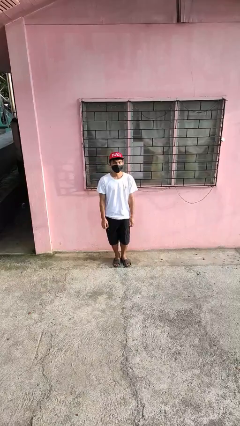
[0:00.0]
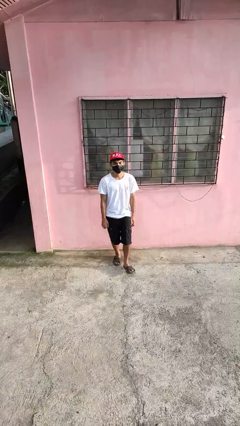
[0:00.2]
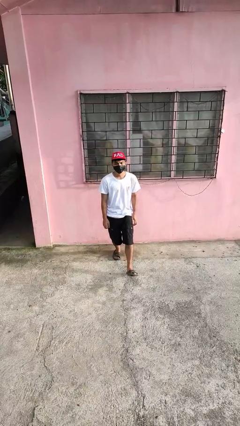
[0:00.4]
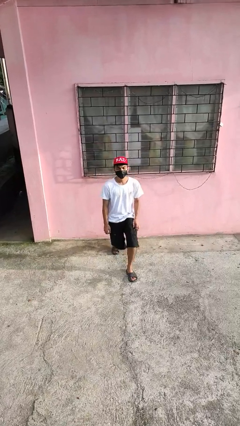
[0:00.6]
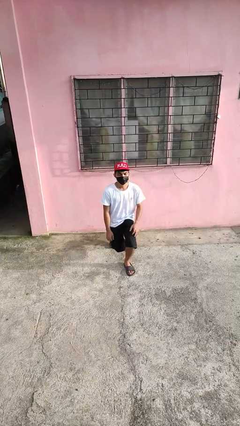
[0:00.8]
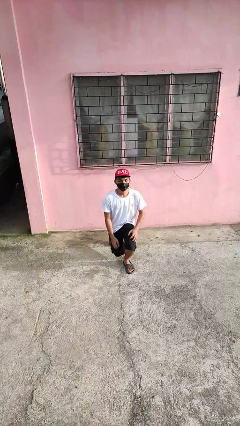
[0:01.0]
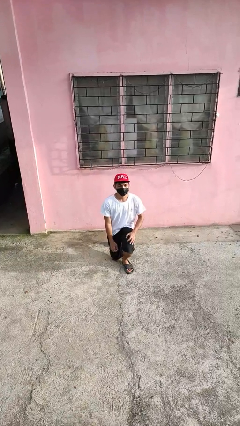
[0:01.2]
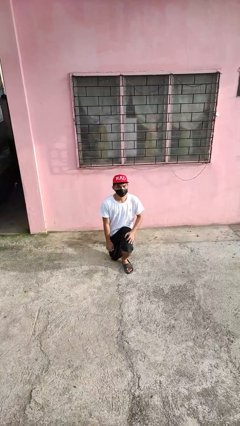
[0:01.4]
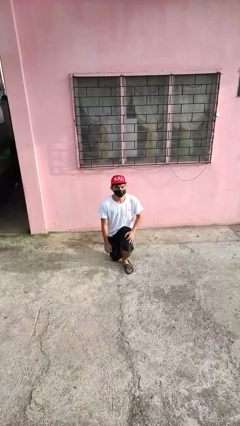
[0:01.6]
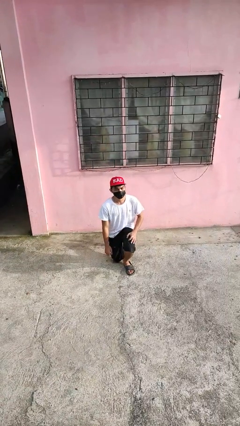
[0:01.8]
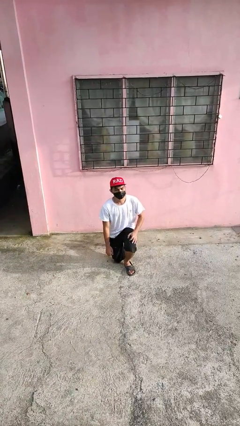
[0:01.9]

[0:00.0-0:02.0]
person kneels

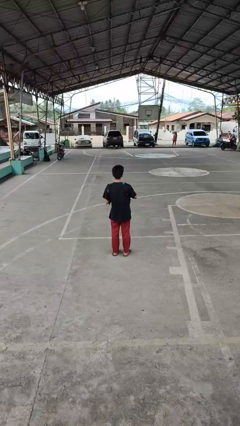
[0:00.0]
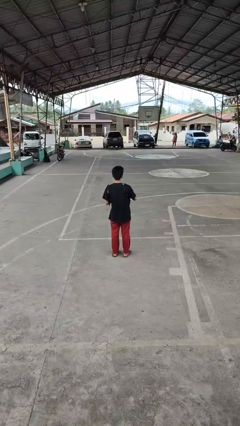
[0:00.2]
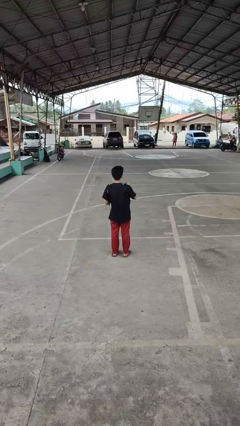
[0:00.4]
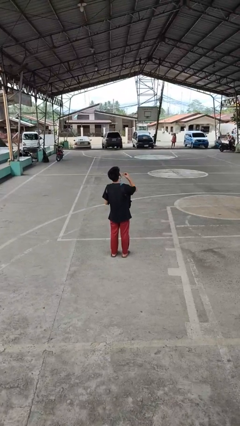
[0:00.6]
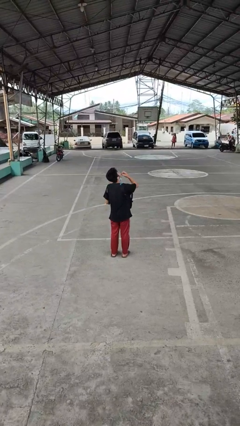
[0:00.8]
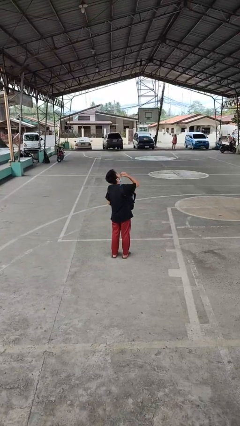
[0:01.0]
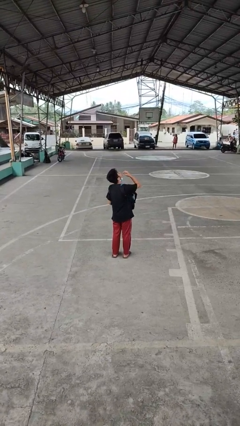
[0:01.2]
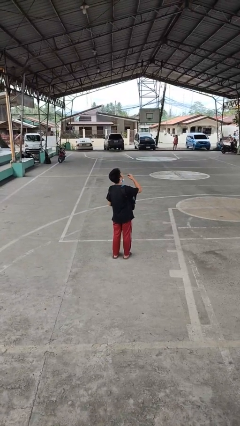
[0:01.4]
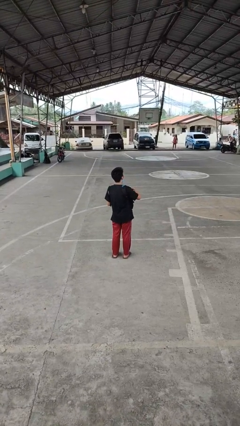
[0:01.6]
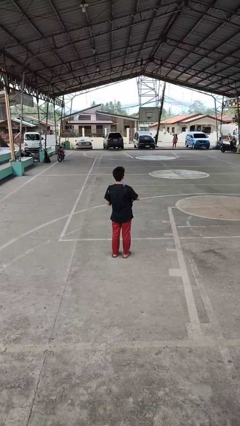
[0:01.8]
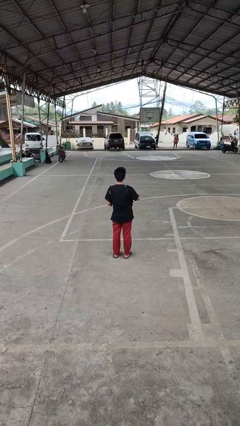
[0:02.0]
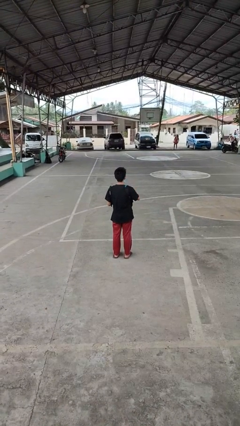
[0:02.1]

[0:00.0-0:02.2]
person eats snack from bag

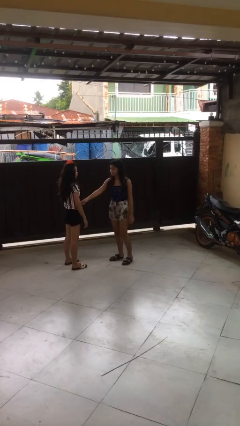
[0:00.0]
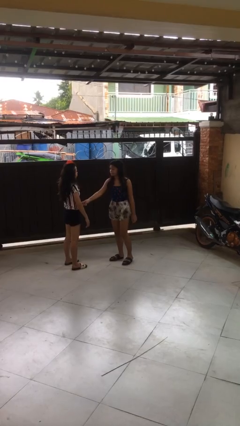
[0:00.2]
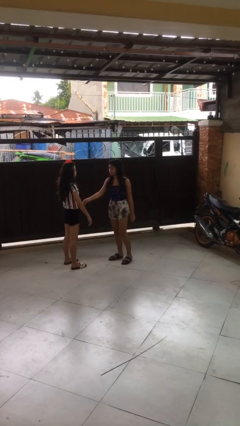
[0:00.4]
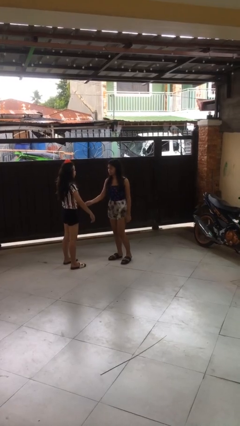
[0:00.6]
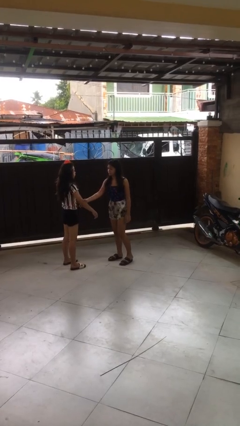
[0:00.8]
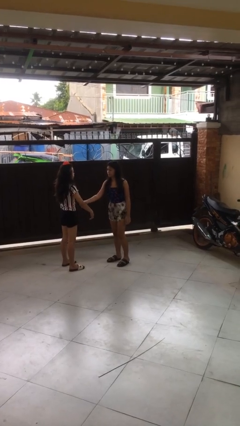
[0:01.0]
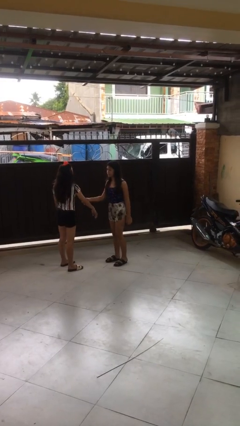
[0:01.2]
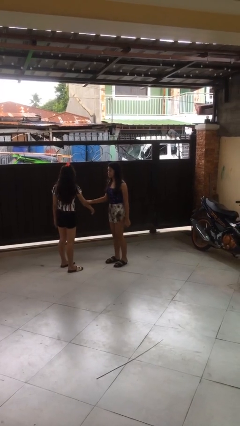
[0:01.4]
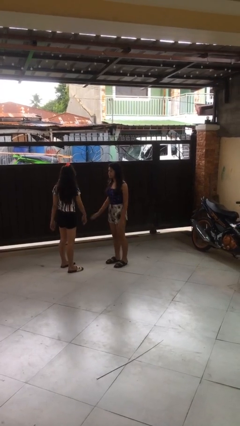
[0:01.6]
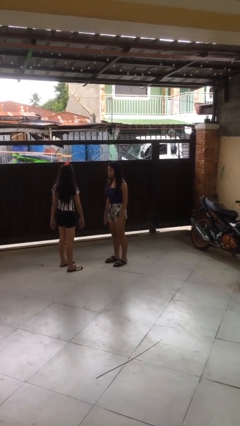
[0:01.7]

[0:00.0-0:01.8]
person grabs person by forearm

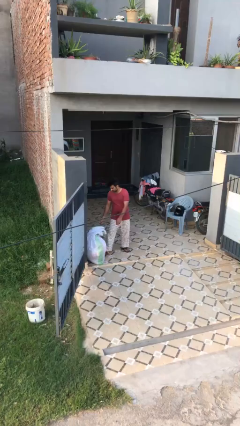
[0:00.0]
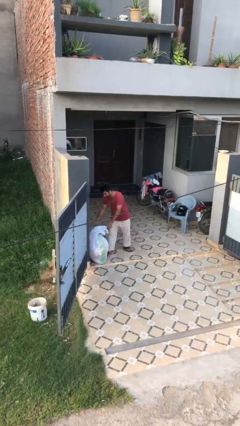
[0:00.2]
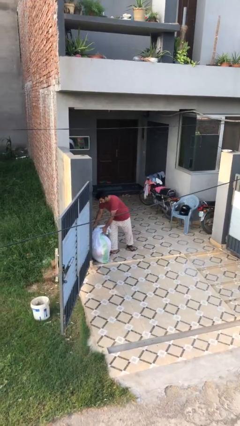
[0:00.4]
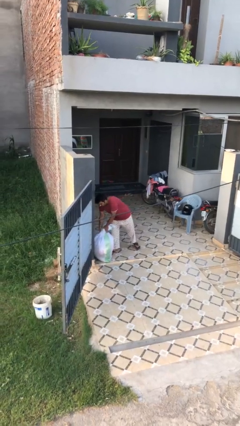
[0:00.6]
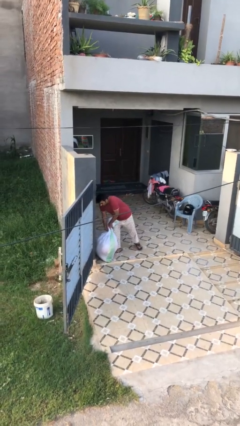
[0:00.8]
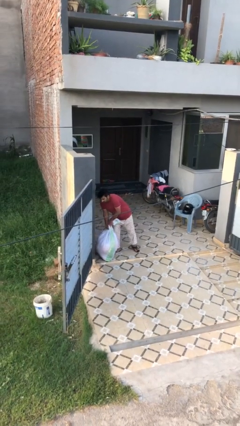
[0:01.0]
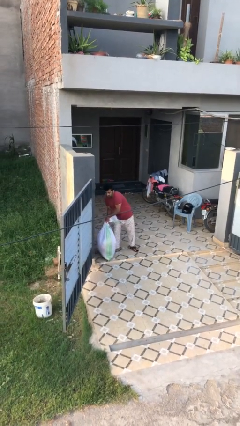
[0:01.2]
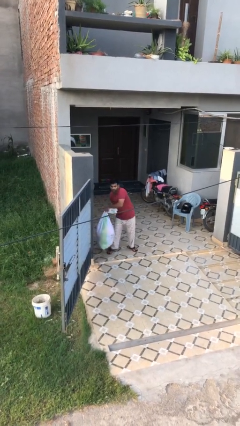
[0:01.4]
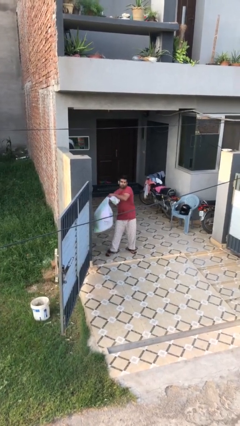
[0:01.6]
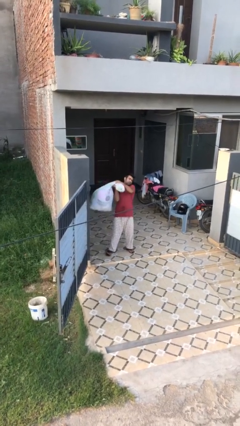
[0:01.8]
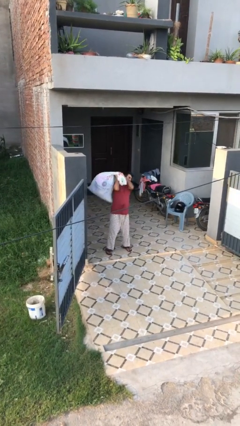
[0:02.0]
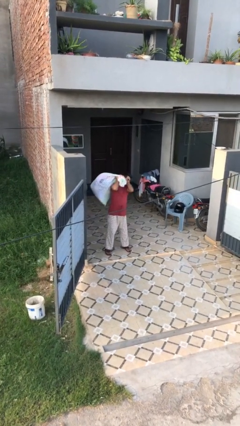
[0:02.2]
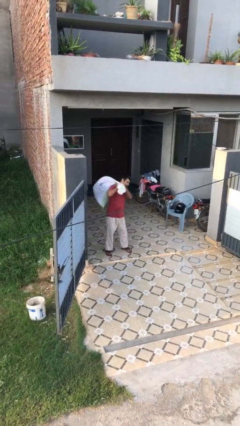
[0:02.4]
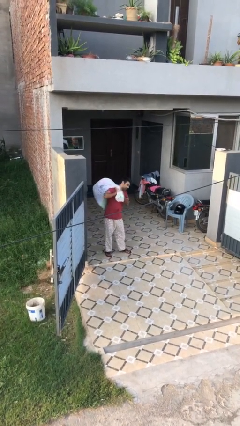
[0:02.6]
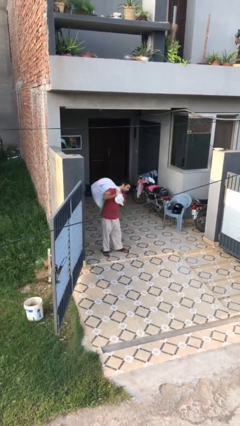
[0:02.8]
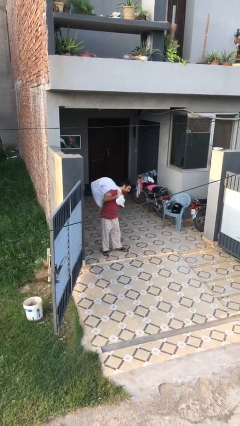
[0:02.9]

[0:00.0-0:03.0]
person picks up object from floor

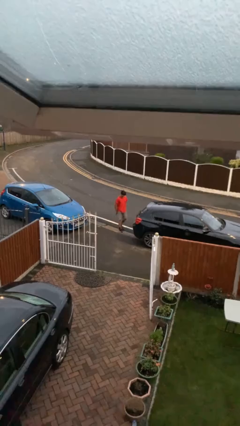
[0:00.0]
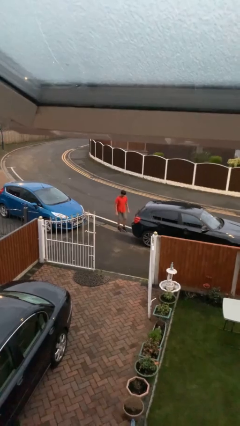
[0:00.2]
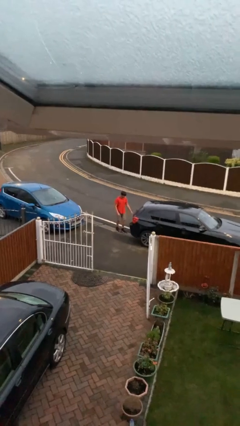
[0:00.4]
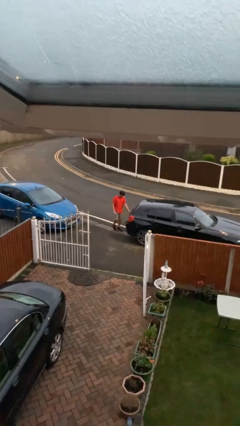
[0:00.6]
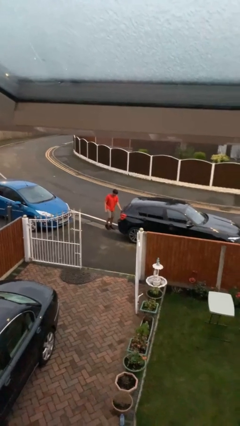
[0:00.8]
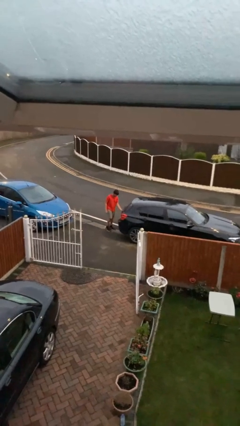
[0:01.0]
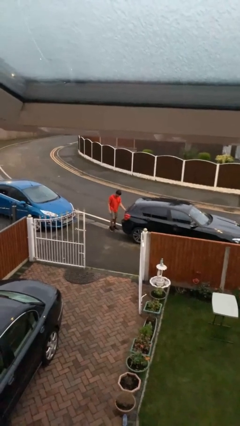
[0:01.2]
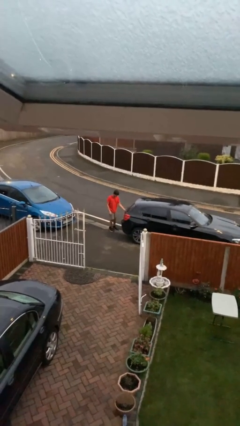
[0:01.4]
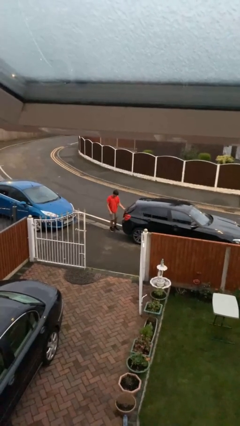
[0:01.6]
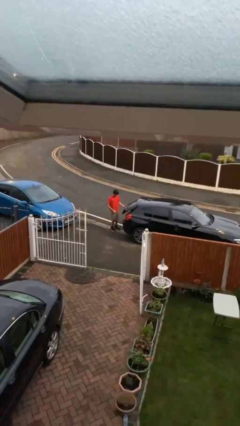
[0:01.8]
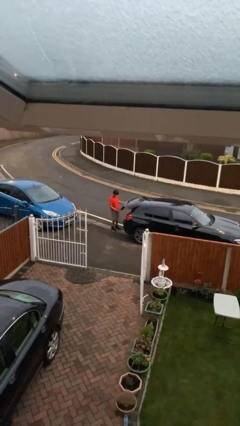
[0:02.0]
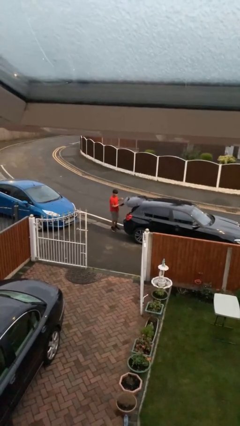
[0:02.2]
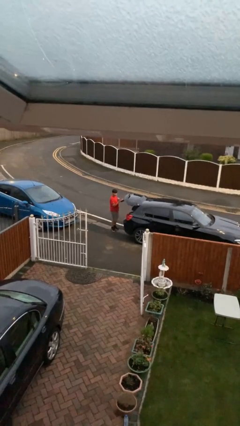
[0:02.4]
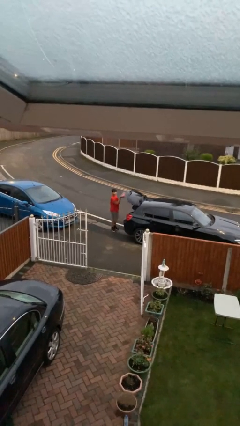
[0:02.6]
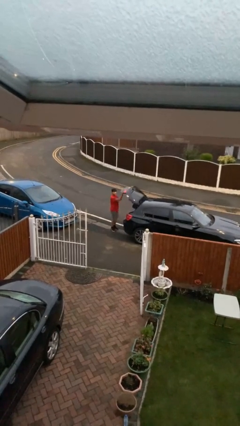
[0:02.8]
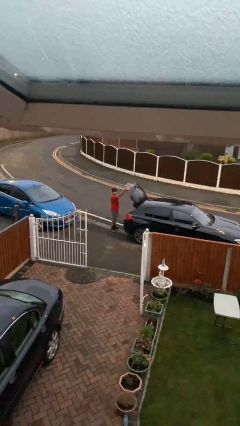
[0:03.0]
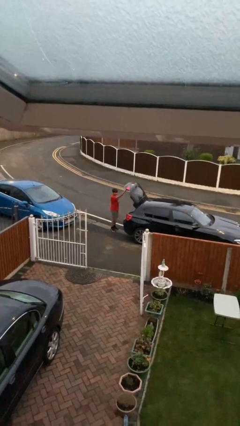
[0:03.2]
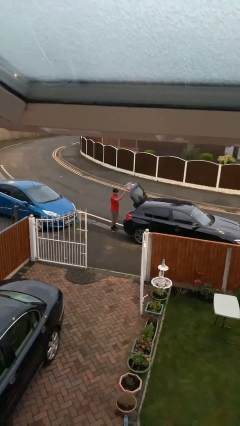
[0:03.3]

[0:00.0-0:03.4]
person opens car trunk

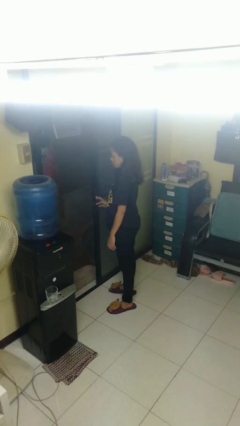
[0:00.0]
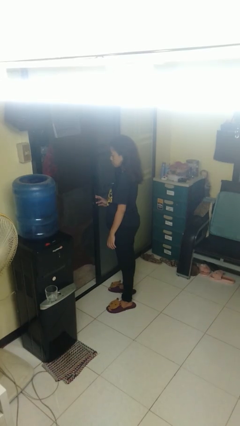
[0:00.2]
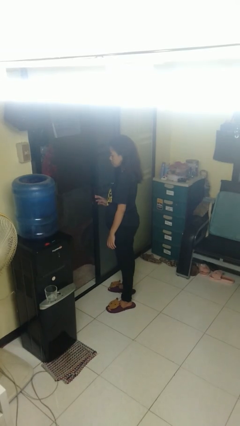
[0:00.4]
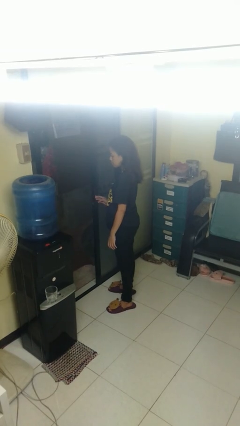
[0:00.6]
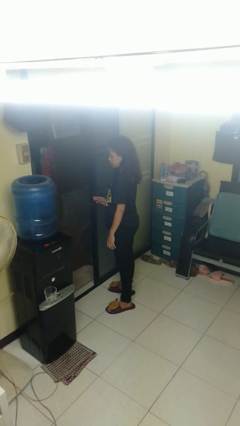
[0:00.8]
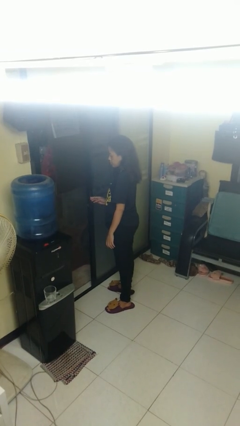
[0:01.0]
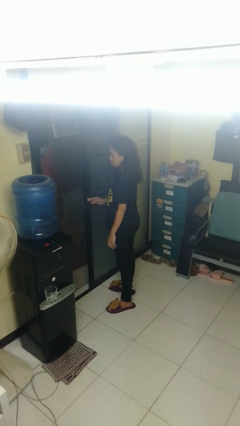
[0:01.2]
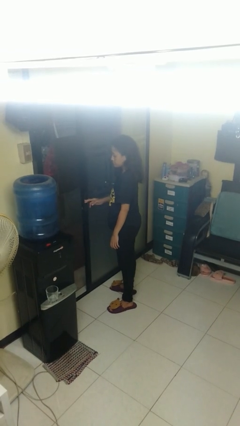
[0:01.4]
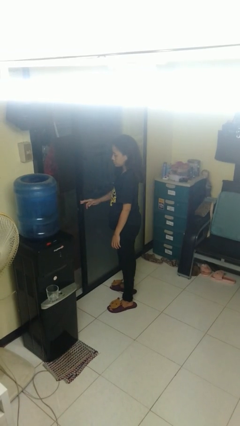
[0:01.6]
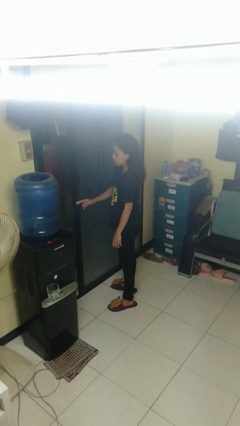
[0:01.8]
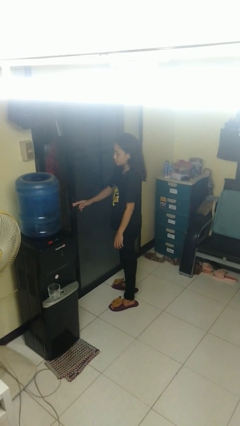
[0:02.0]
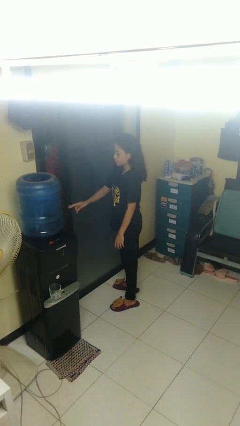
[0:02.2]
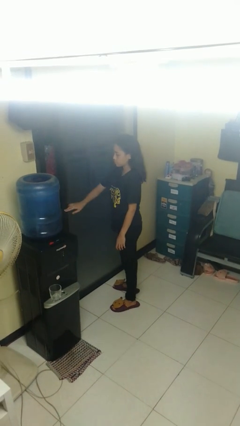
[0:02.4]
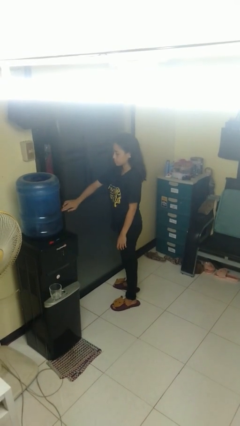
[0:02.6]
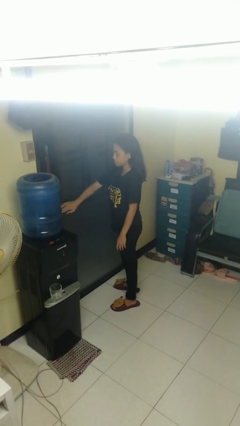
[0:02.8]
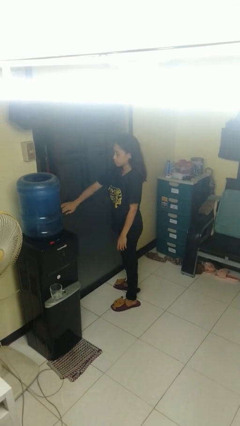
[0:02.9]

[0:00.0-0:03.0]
person closes sliding door

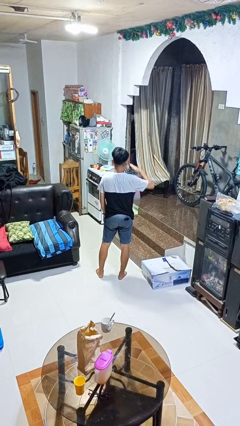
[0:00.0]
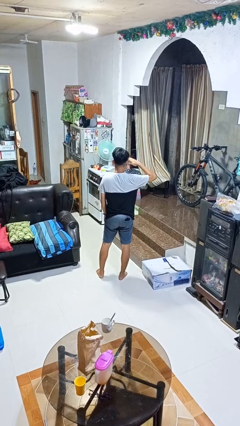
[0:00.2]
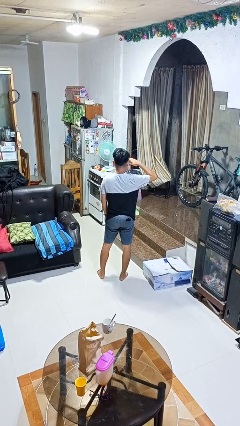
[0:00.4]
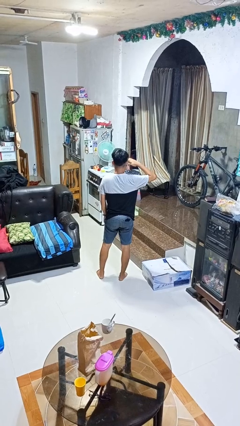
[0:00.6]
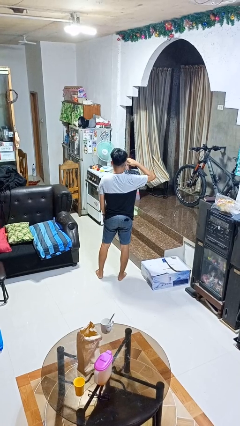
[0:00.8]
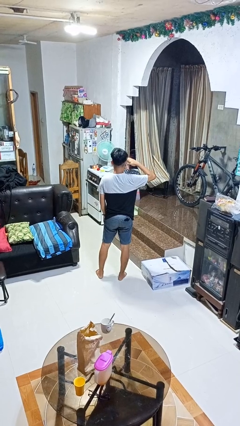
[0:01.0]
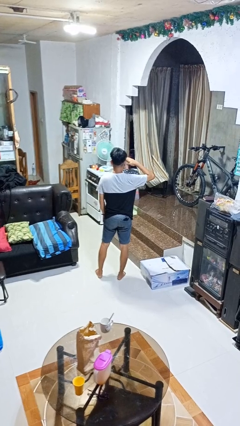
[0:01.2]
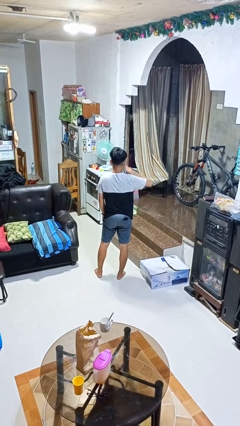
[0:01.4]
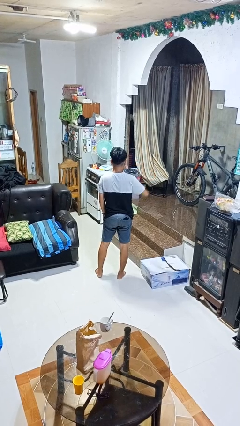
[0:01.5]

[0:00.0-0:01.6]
person salutes
